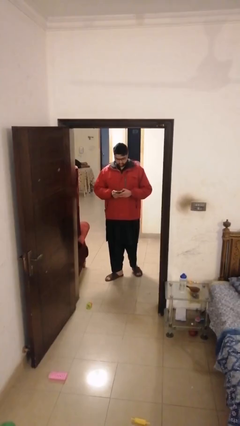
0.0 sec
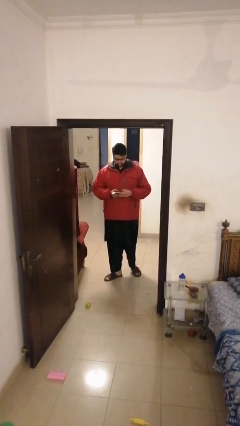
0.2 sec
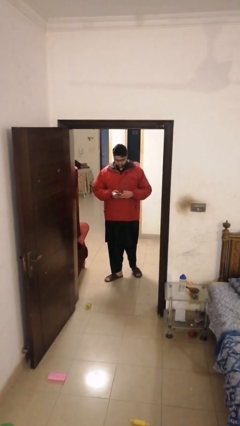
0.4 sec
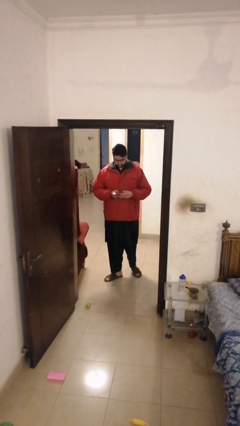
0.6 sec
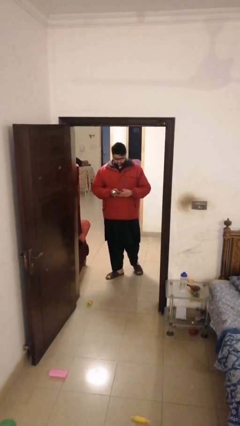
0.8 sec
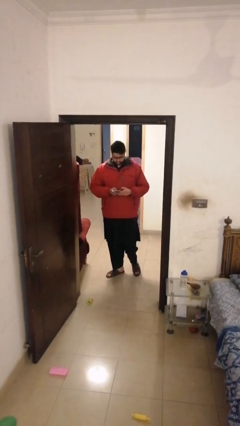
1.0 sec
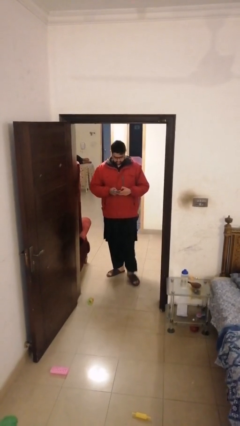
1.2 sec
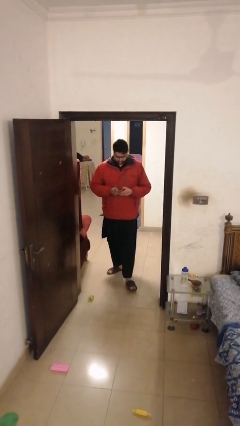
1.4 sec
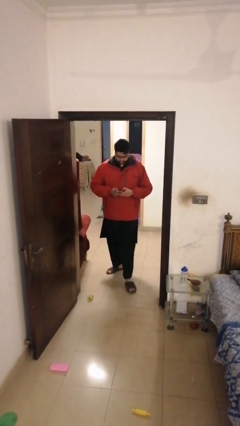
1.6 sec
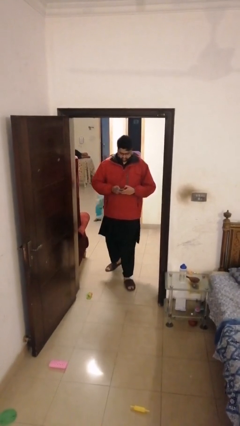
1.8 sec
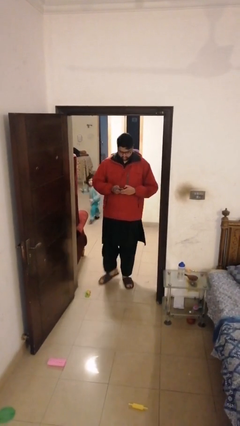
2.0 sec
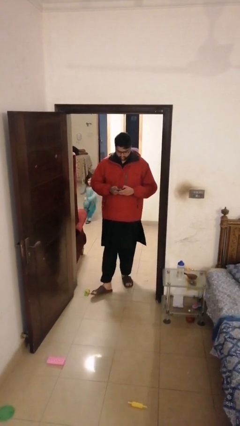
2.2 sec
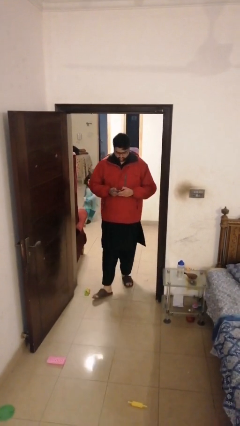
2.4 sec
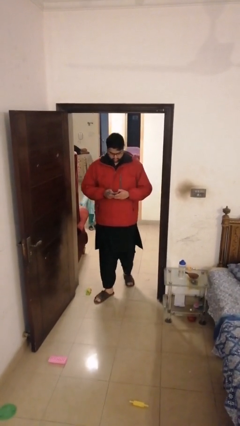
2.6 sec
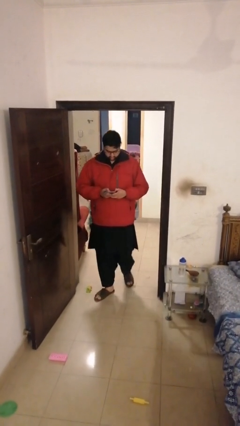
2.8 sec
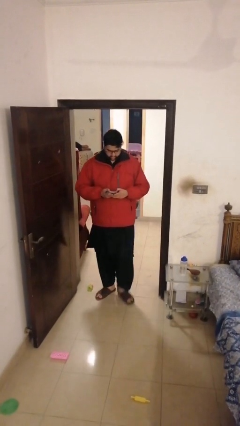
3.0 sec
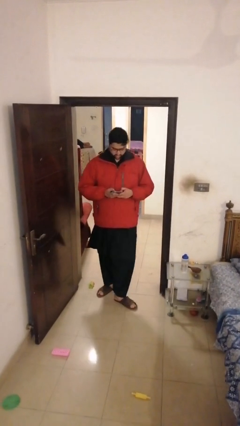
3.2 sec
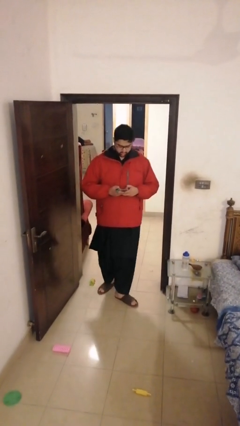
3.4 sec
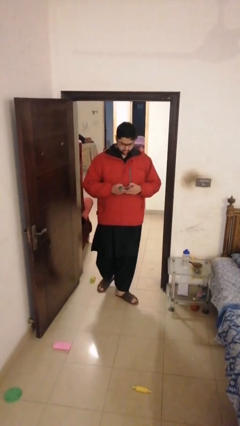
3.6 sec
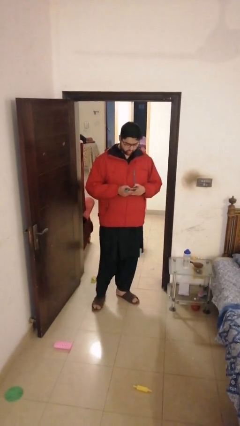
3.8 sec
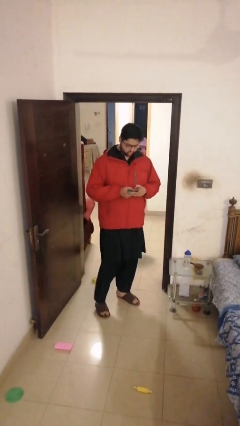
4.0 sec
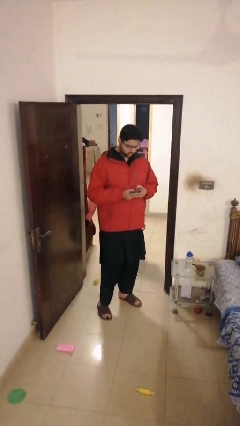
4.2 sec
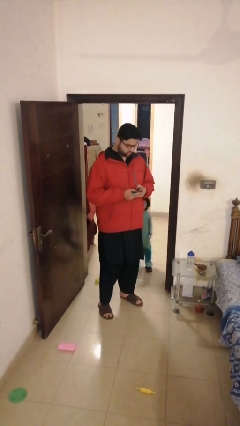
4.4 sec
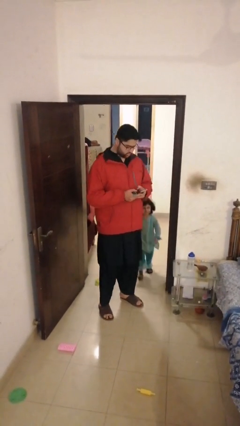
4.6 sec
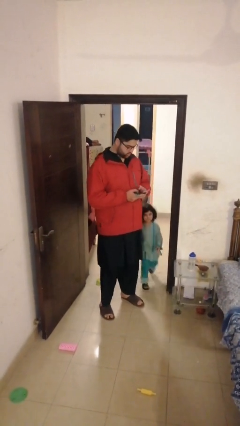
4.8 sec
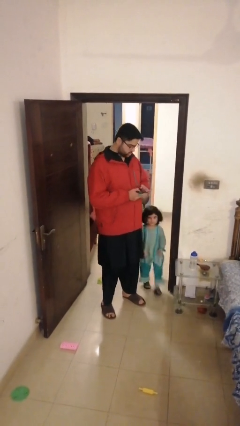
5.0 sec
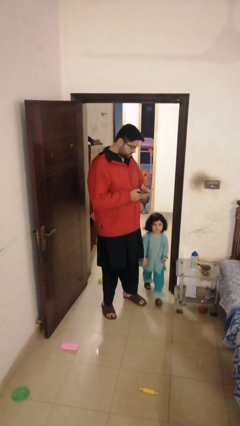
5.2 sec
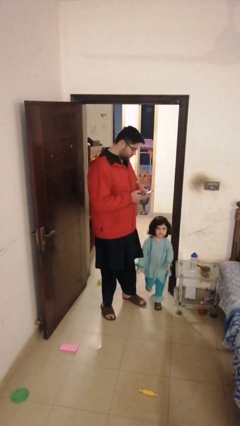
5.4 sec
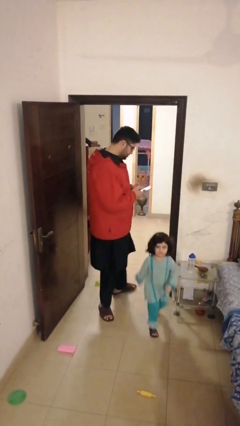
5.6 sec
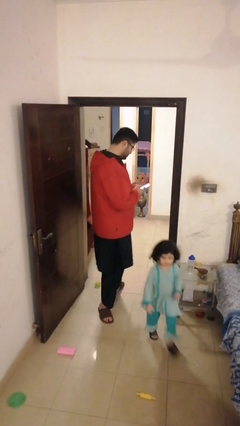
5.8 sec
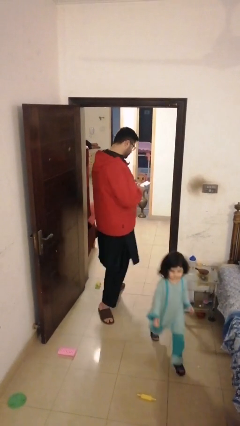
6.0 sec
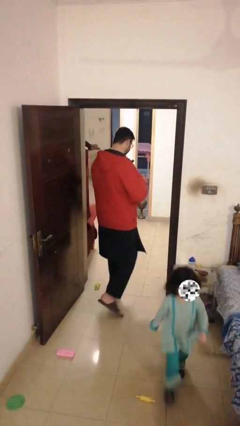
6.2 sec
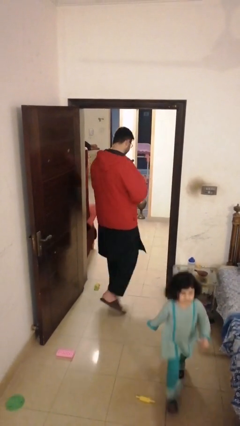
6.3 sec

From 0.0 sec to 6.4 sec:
person enters scene through structure

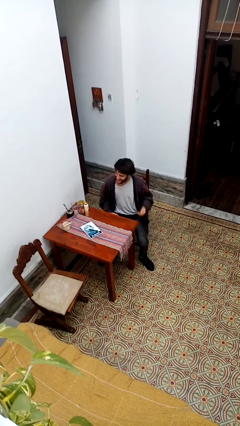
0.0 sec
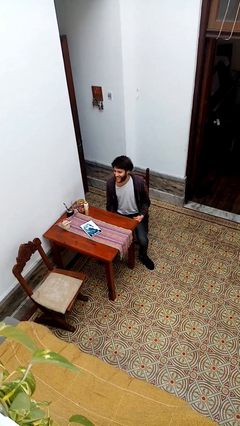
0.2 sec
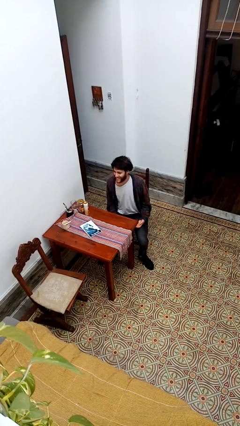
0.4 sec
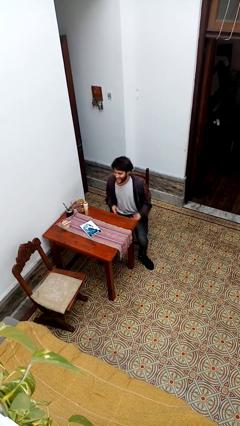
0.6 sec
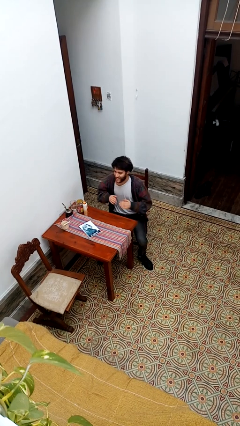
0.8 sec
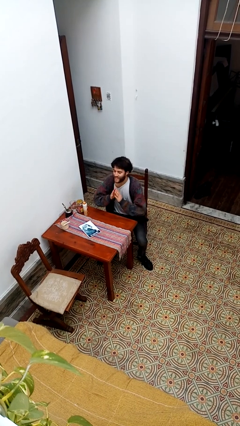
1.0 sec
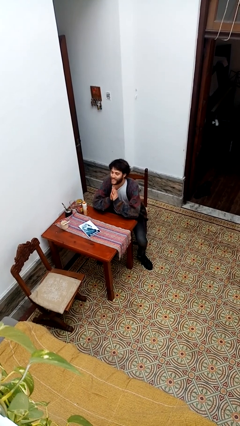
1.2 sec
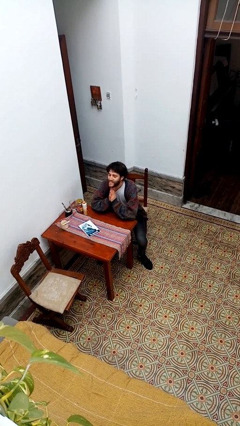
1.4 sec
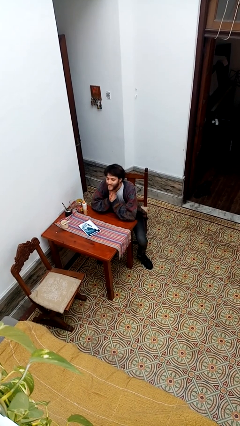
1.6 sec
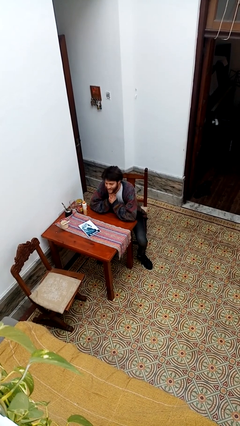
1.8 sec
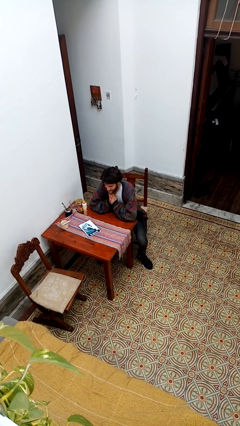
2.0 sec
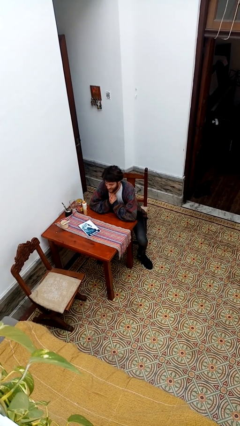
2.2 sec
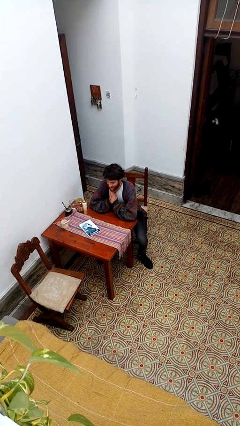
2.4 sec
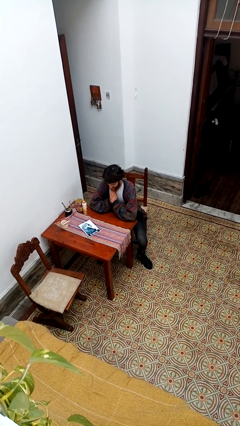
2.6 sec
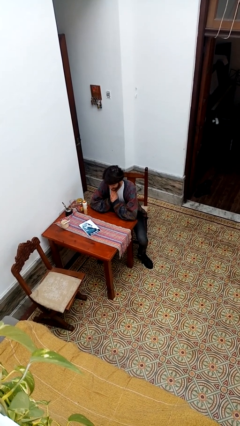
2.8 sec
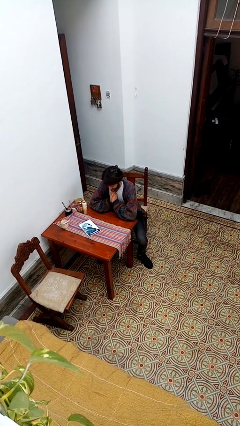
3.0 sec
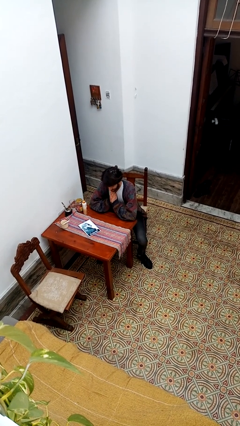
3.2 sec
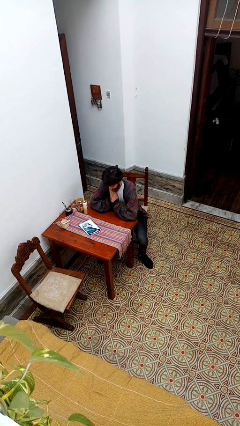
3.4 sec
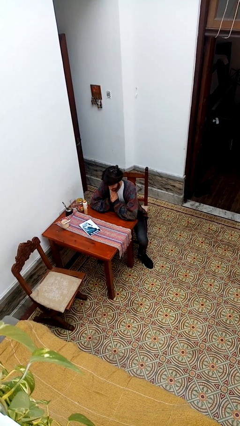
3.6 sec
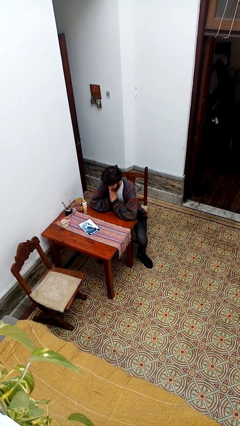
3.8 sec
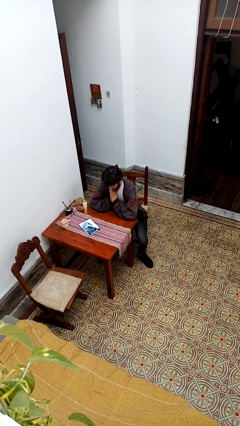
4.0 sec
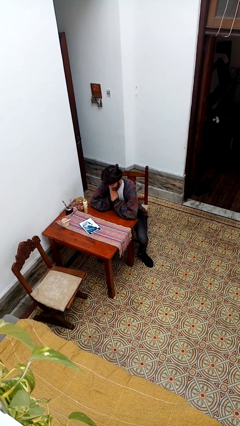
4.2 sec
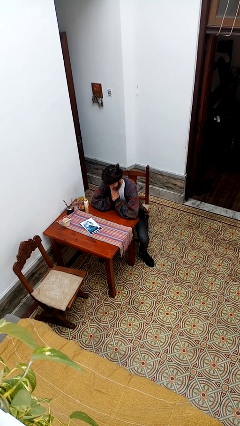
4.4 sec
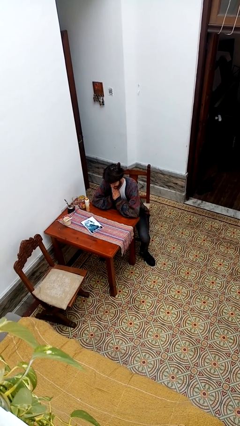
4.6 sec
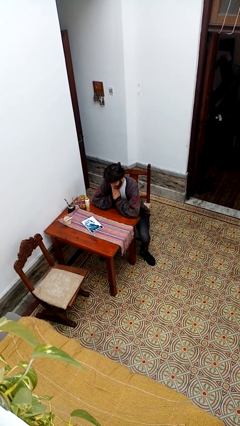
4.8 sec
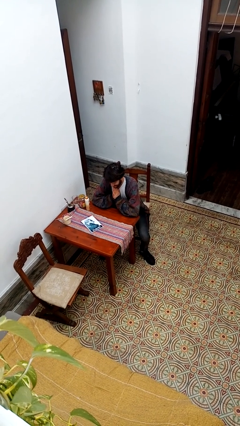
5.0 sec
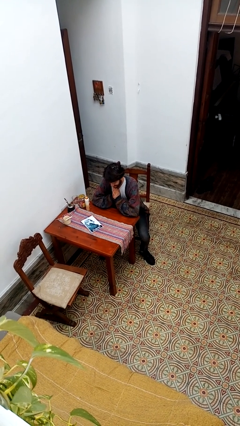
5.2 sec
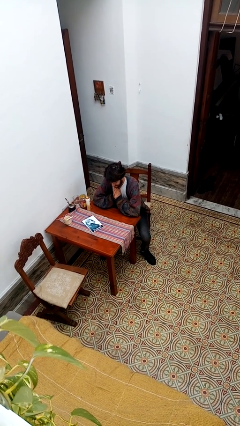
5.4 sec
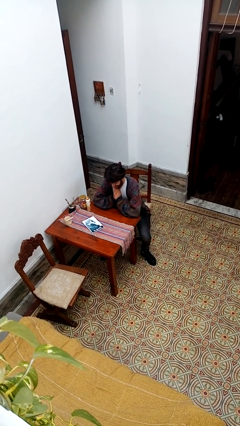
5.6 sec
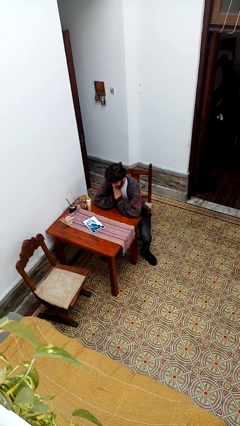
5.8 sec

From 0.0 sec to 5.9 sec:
person prays

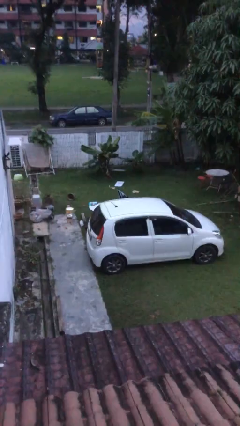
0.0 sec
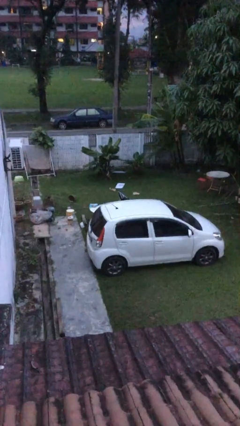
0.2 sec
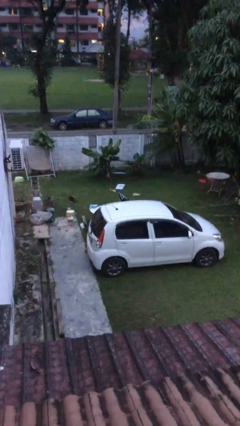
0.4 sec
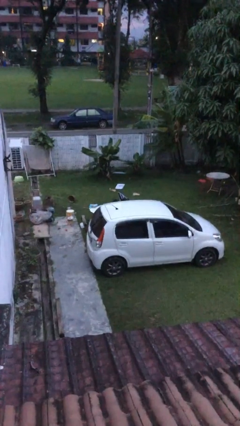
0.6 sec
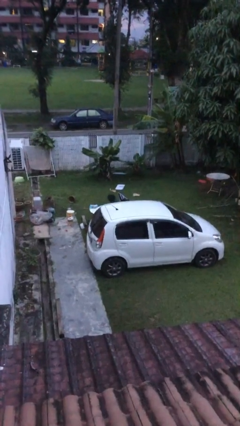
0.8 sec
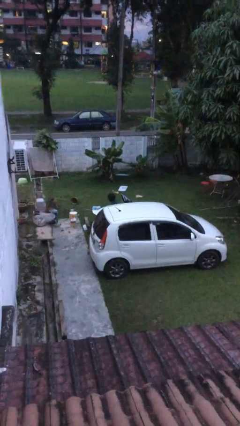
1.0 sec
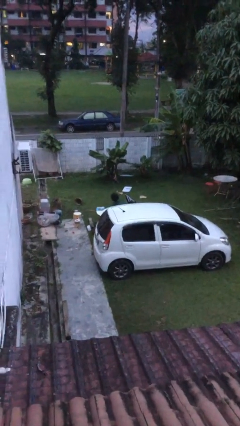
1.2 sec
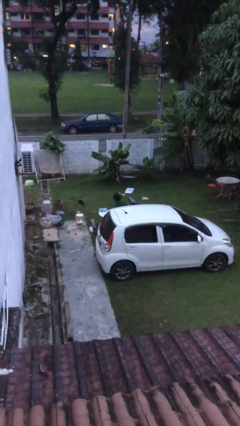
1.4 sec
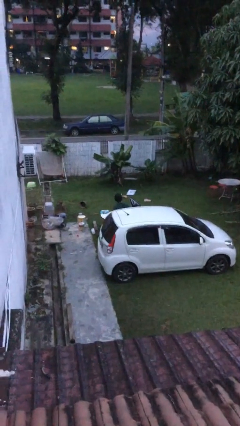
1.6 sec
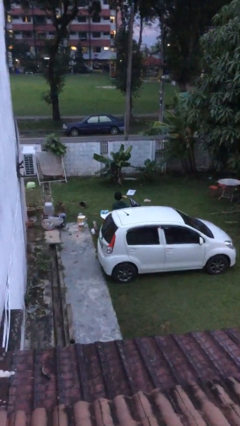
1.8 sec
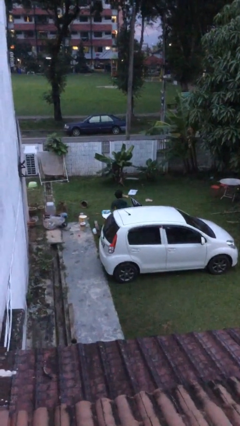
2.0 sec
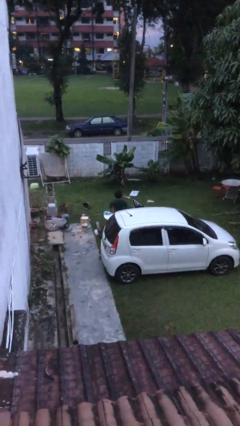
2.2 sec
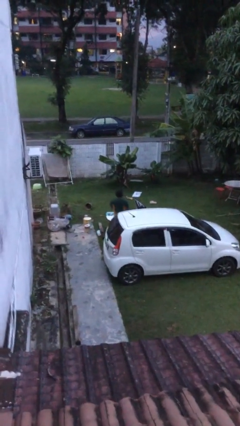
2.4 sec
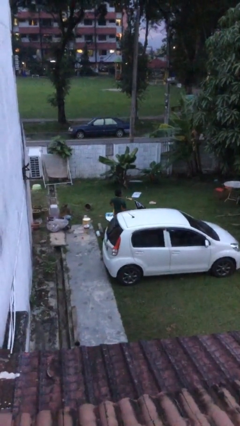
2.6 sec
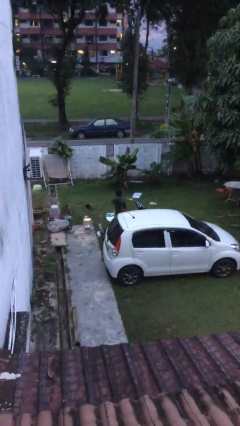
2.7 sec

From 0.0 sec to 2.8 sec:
person exits car

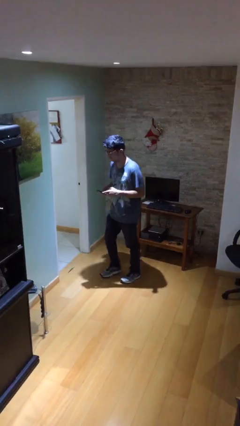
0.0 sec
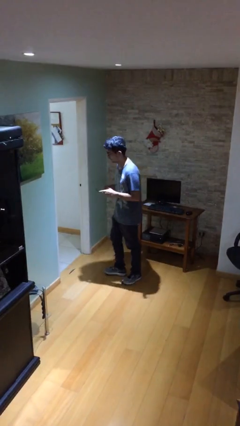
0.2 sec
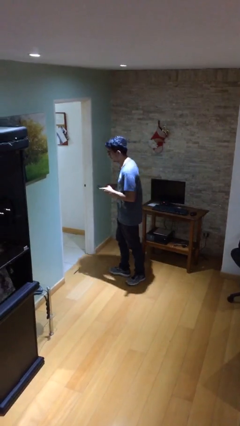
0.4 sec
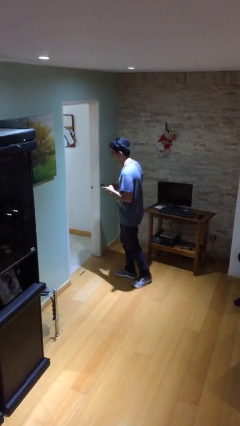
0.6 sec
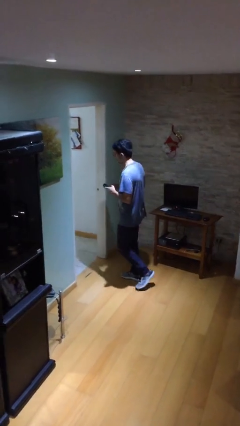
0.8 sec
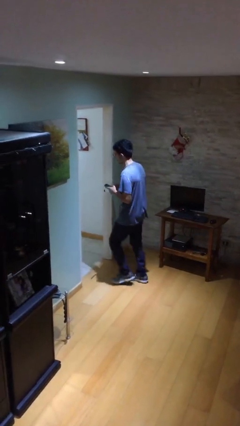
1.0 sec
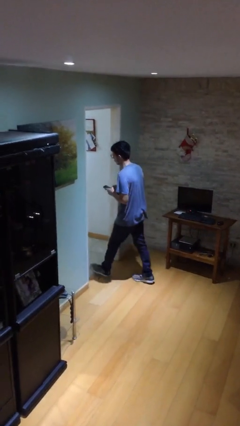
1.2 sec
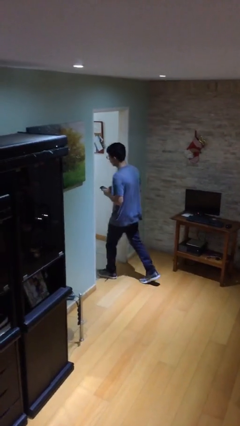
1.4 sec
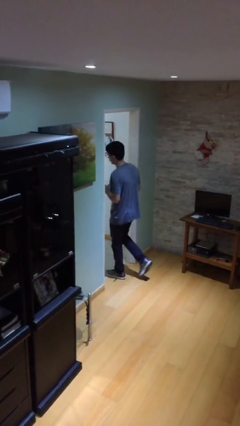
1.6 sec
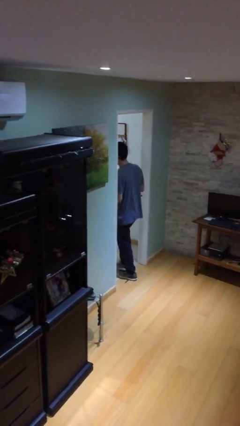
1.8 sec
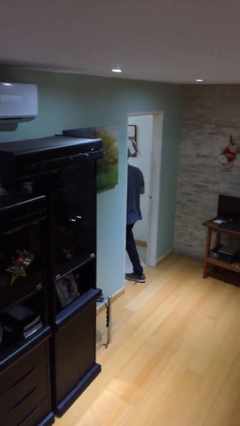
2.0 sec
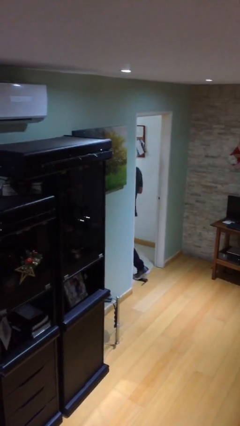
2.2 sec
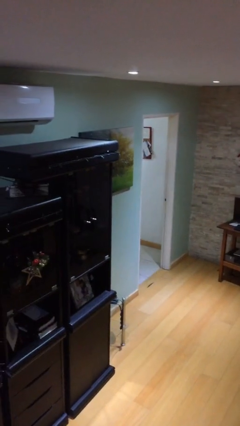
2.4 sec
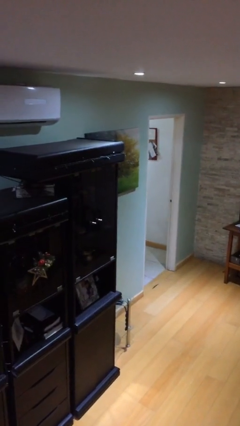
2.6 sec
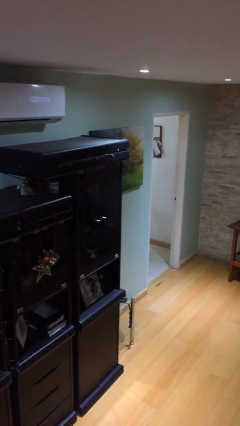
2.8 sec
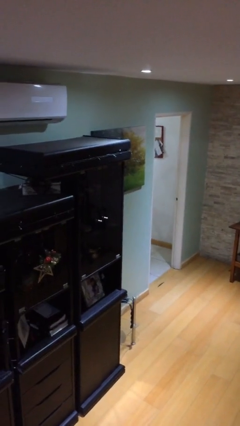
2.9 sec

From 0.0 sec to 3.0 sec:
person exits scene through structure
